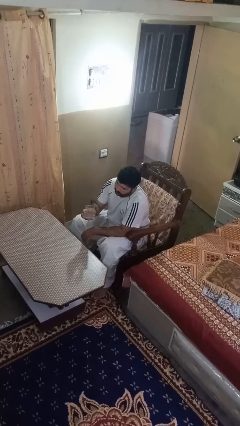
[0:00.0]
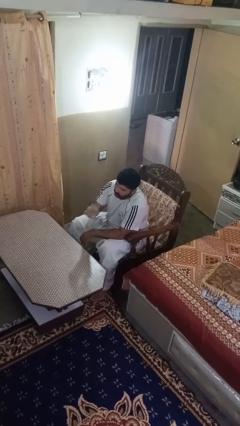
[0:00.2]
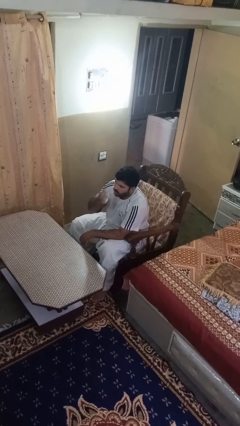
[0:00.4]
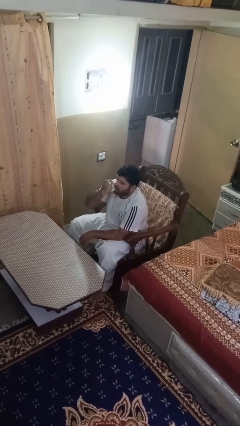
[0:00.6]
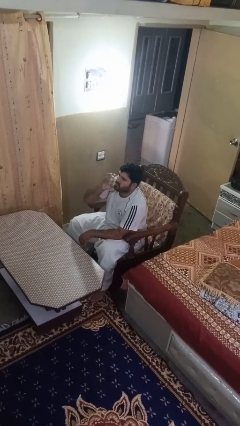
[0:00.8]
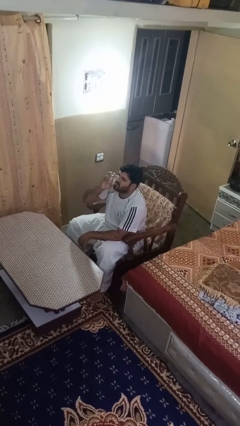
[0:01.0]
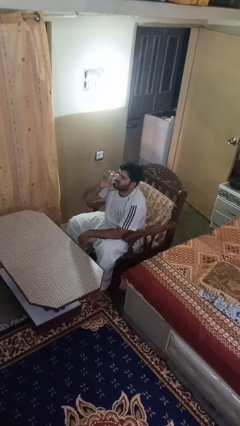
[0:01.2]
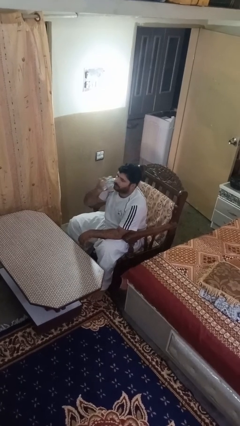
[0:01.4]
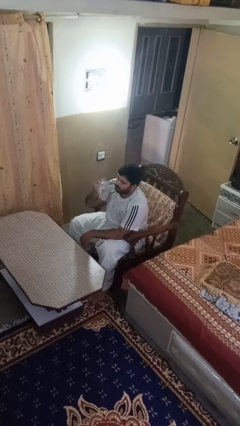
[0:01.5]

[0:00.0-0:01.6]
person drinks from shotglass

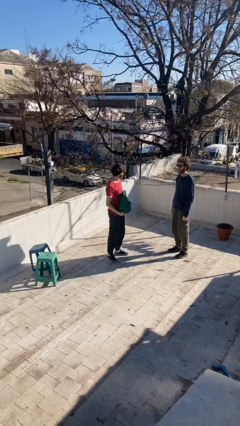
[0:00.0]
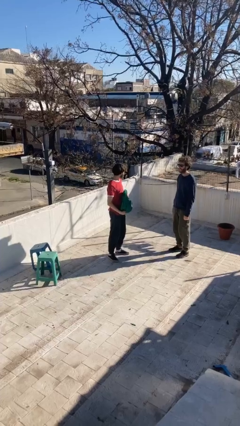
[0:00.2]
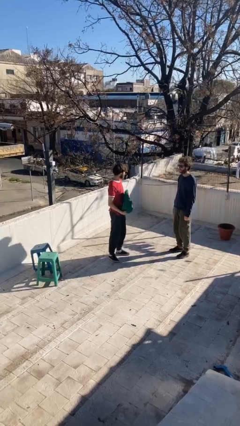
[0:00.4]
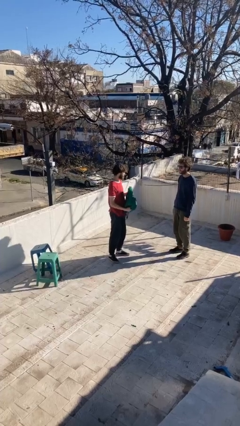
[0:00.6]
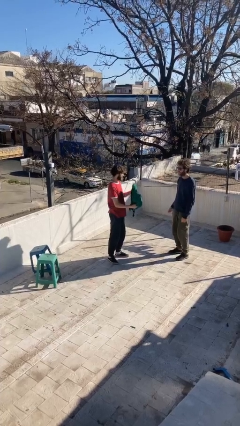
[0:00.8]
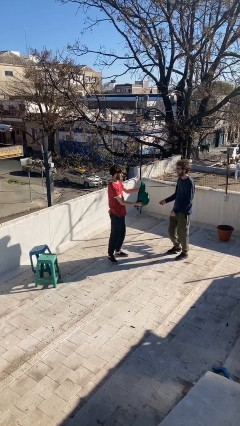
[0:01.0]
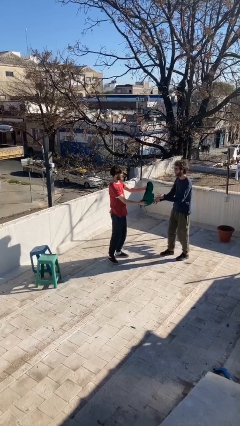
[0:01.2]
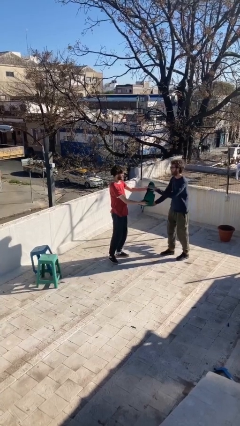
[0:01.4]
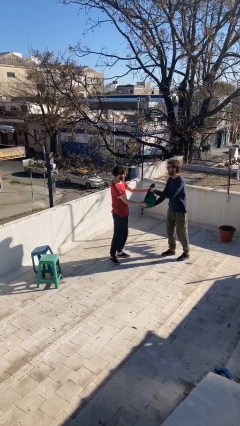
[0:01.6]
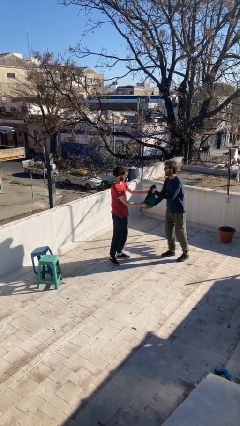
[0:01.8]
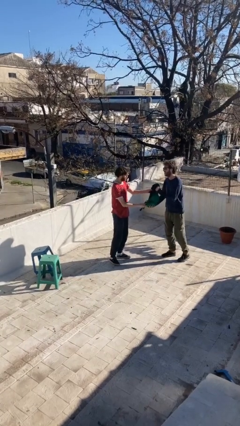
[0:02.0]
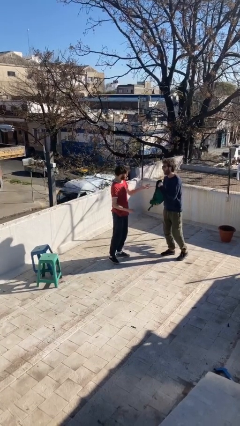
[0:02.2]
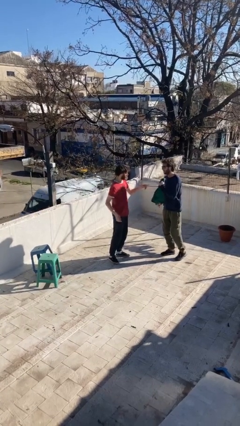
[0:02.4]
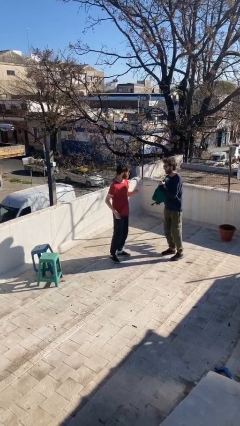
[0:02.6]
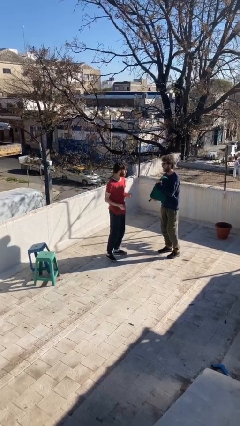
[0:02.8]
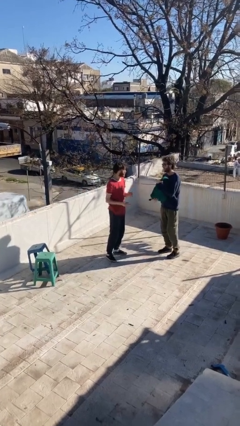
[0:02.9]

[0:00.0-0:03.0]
person transfers object to person

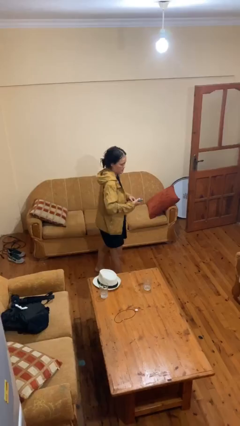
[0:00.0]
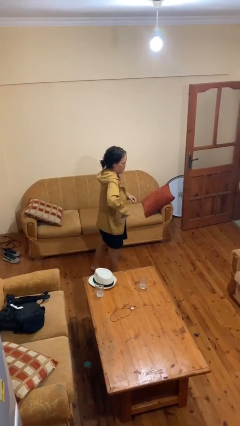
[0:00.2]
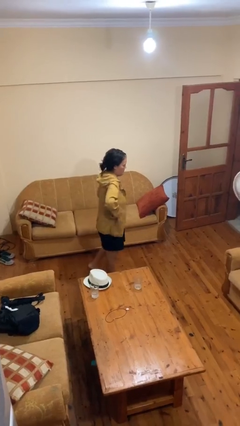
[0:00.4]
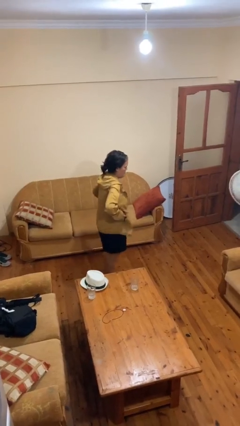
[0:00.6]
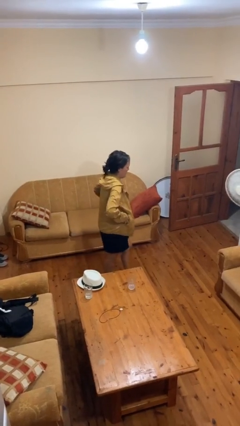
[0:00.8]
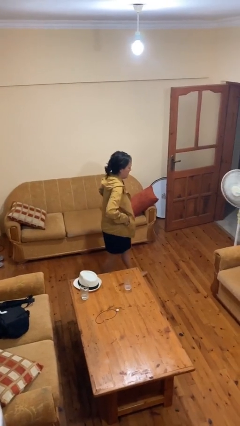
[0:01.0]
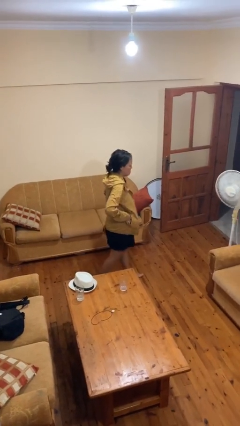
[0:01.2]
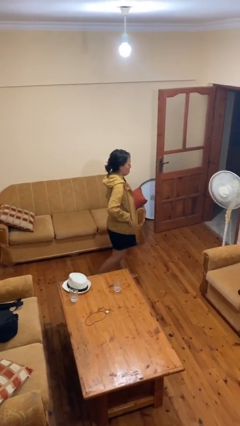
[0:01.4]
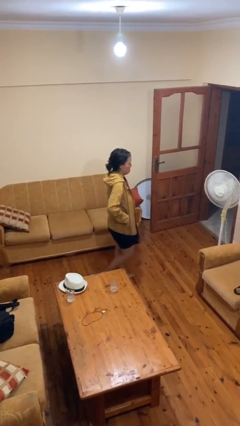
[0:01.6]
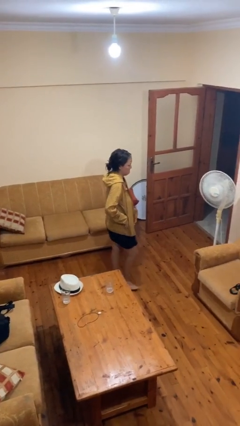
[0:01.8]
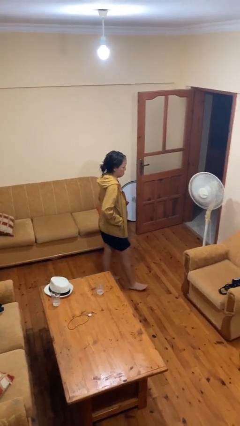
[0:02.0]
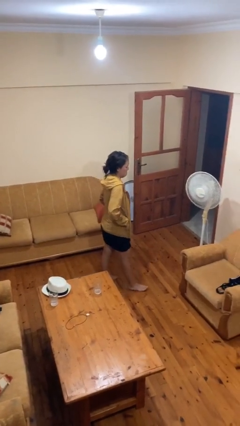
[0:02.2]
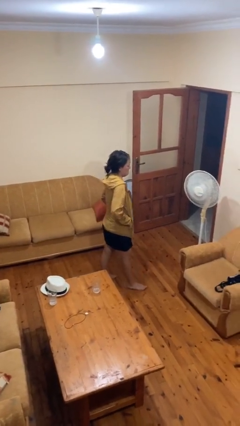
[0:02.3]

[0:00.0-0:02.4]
person puts phone into pocket

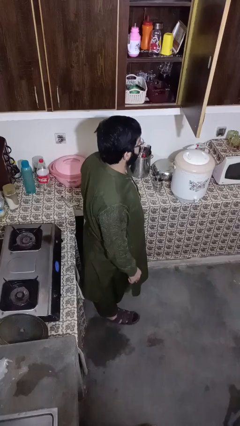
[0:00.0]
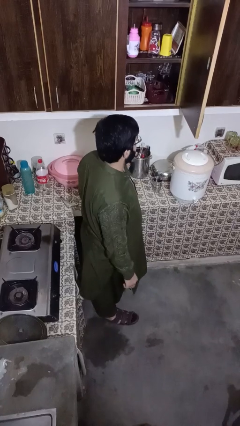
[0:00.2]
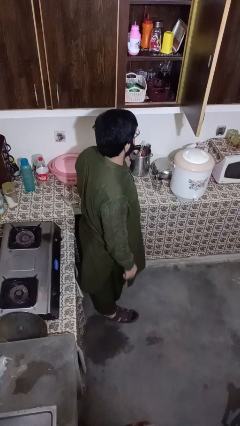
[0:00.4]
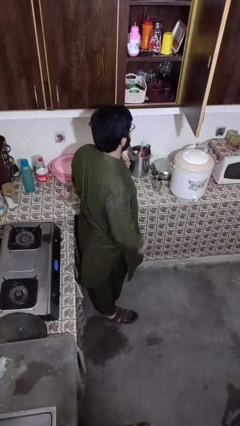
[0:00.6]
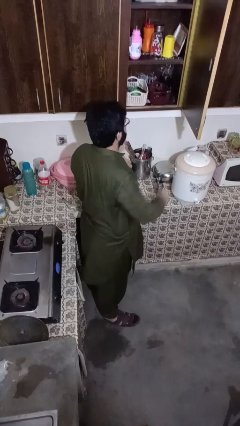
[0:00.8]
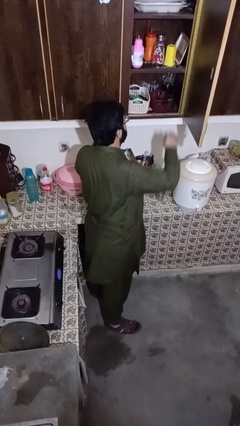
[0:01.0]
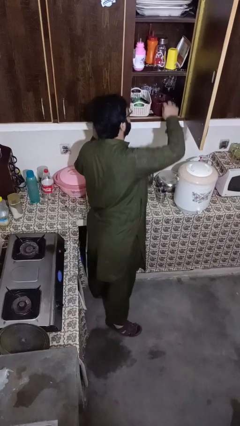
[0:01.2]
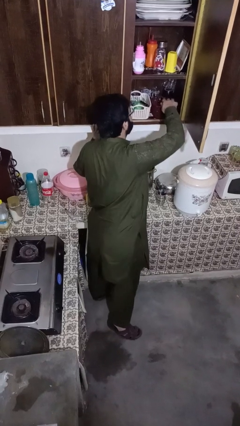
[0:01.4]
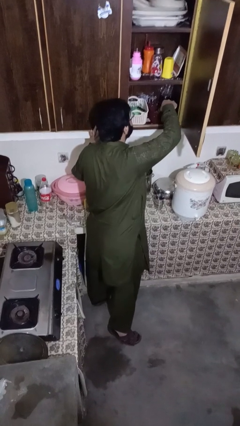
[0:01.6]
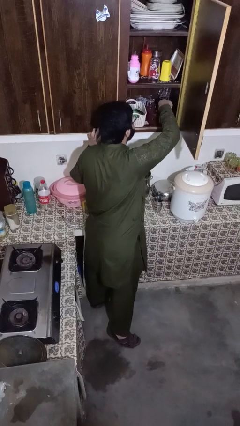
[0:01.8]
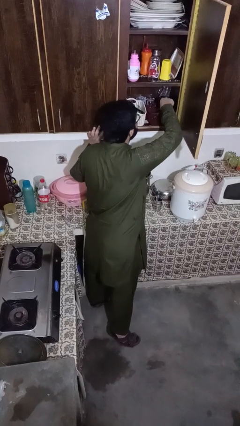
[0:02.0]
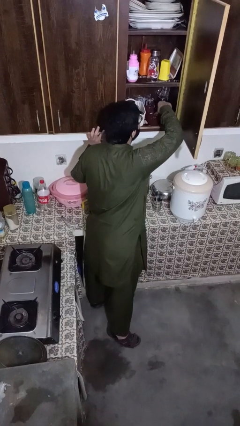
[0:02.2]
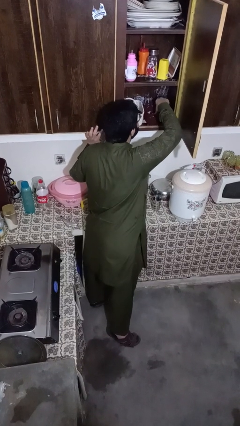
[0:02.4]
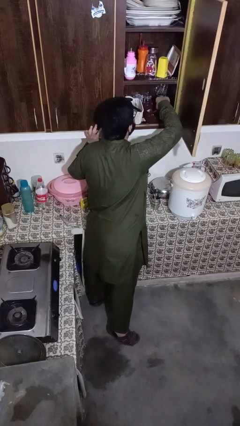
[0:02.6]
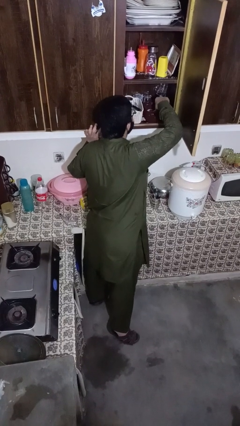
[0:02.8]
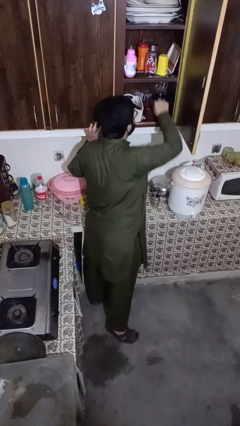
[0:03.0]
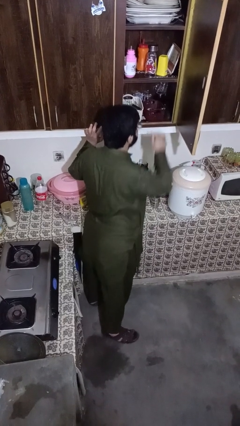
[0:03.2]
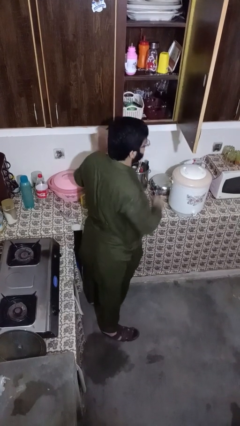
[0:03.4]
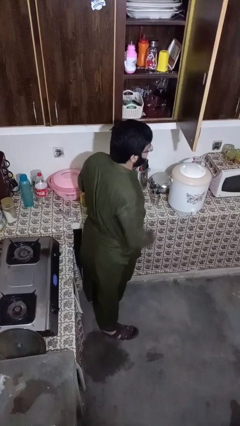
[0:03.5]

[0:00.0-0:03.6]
person searches in kitchen drawer

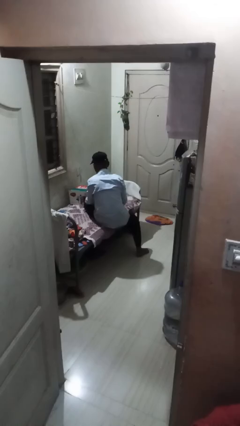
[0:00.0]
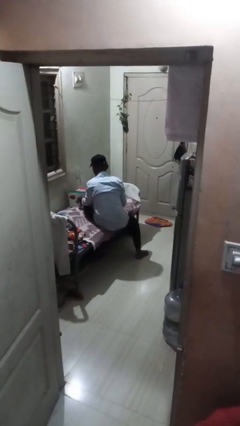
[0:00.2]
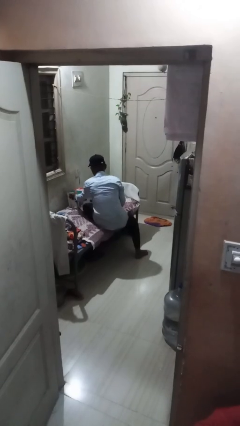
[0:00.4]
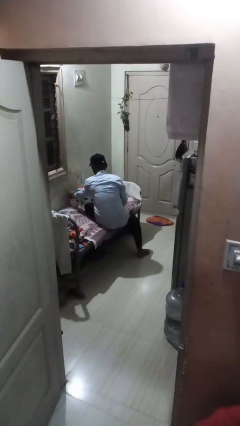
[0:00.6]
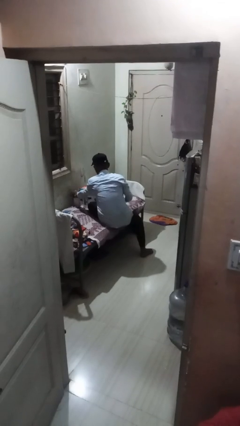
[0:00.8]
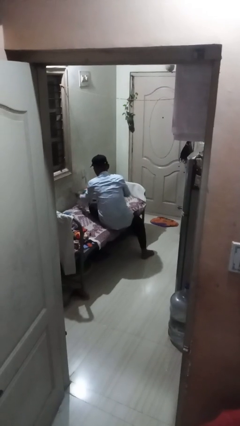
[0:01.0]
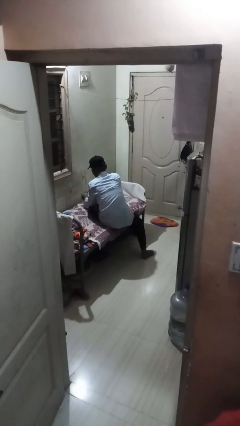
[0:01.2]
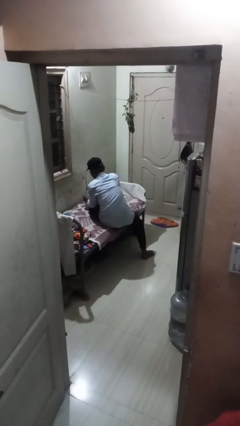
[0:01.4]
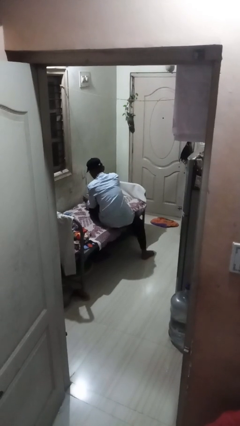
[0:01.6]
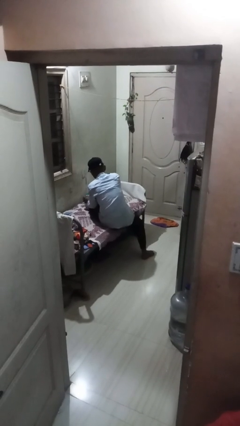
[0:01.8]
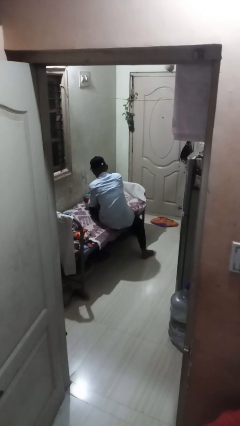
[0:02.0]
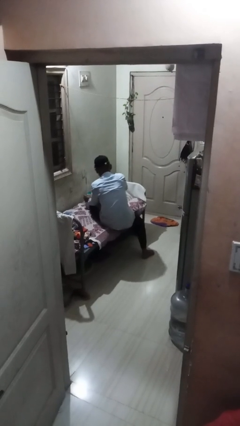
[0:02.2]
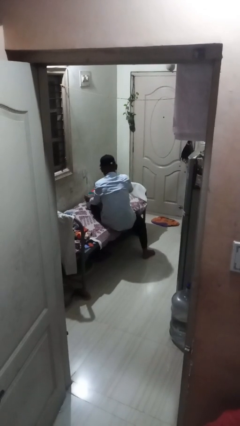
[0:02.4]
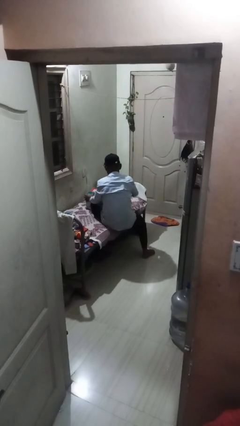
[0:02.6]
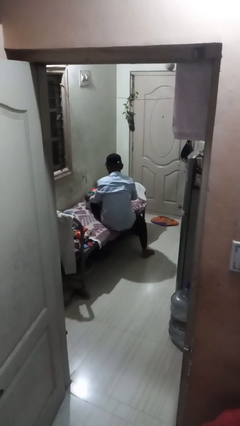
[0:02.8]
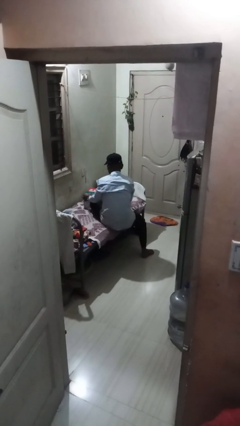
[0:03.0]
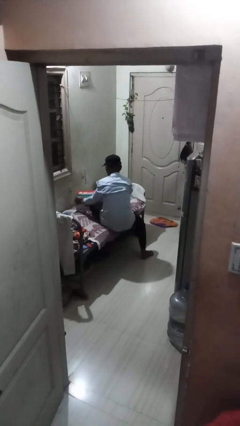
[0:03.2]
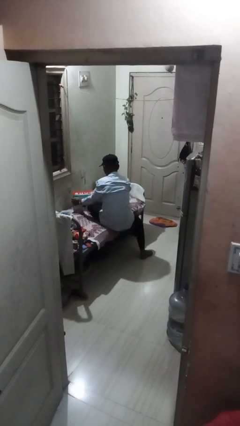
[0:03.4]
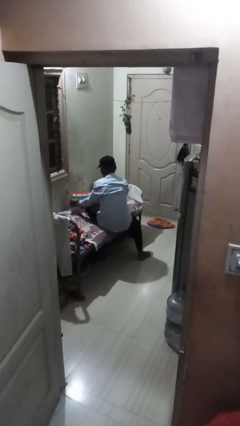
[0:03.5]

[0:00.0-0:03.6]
person wraps box

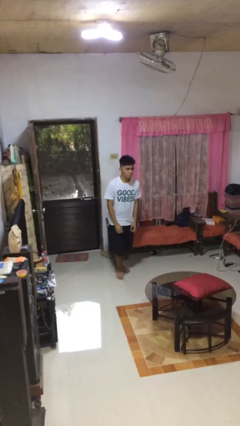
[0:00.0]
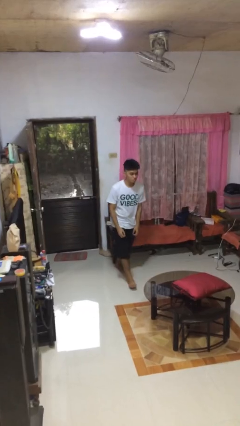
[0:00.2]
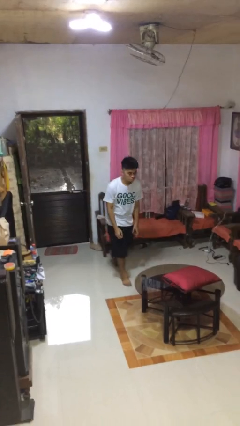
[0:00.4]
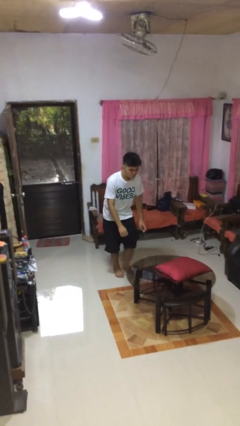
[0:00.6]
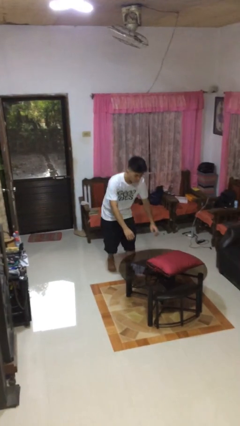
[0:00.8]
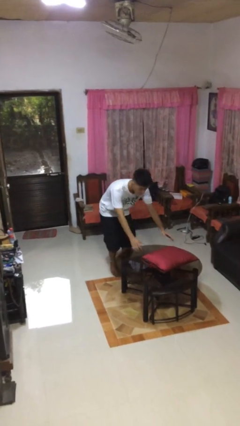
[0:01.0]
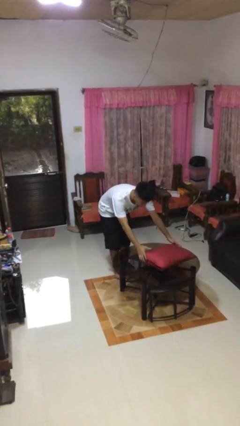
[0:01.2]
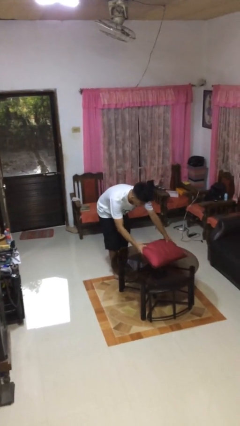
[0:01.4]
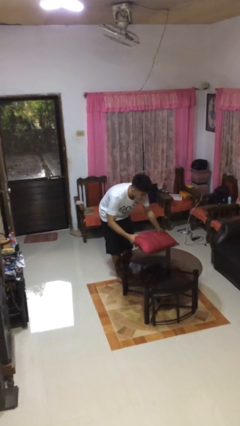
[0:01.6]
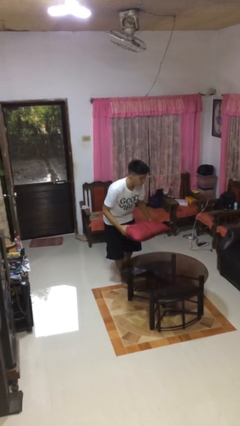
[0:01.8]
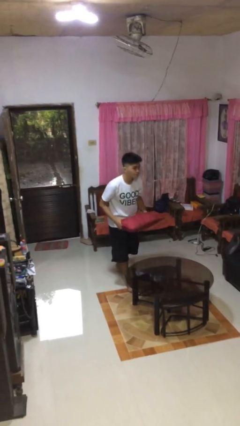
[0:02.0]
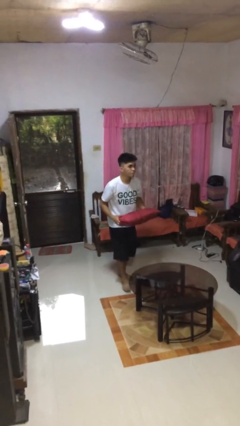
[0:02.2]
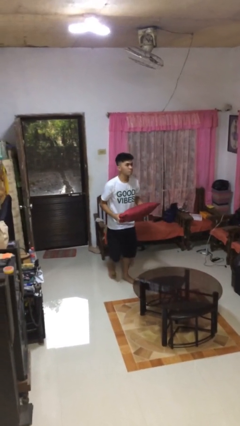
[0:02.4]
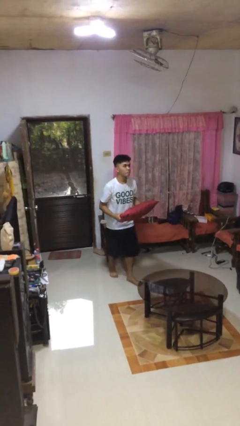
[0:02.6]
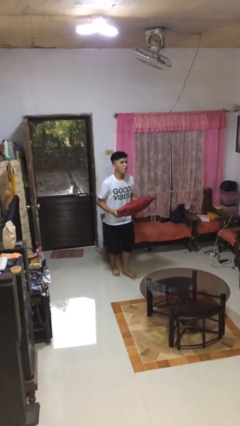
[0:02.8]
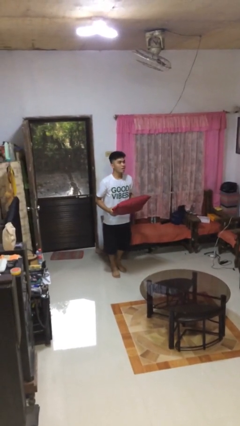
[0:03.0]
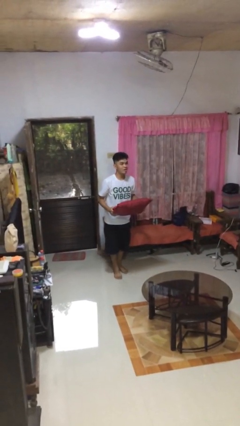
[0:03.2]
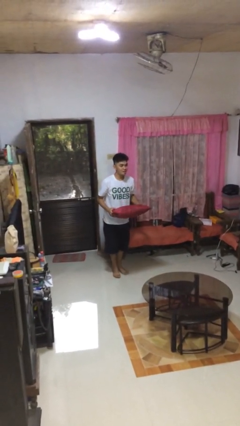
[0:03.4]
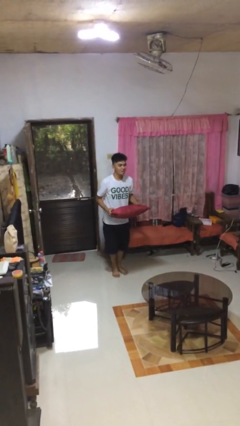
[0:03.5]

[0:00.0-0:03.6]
person picks up object from table
